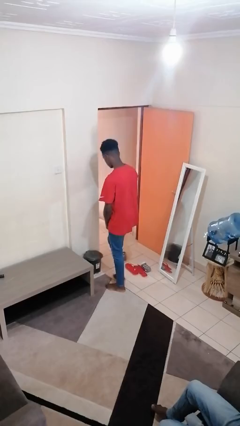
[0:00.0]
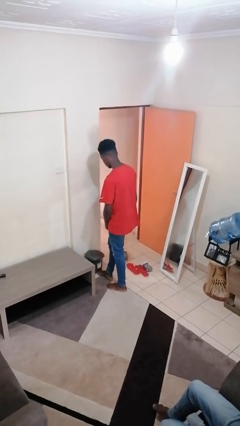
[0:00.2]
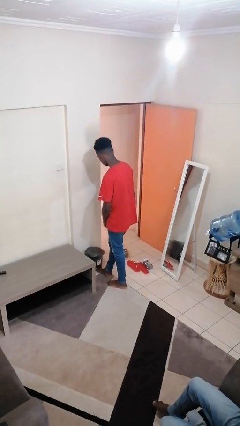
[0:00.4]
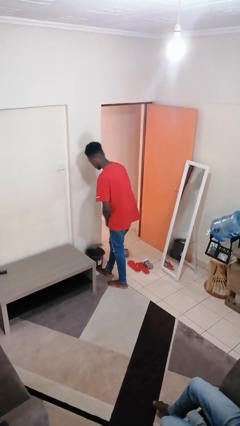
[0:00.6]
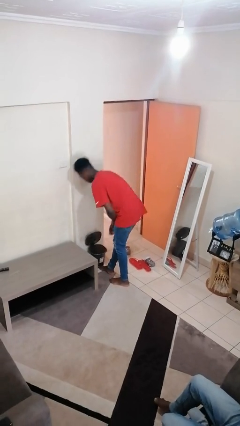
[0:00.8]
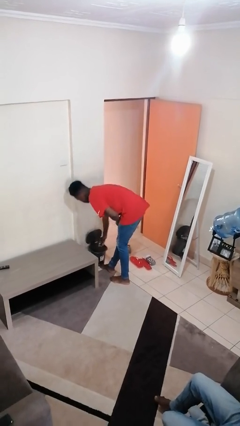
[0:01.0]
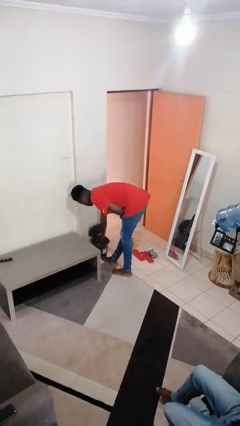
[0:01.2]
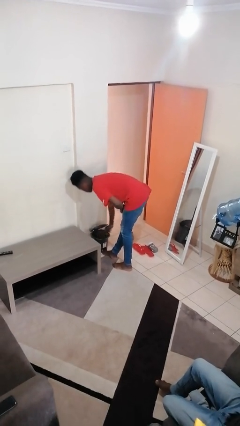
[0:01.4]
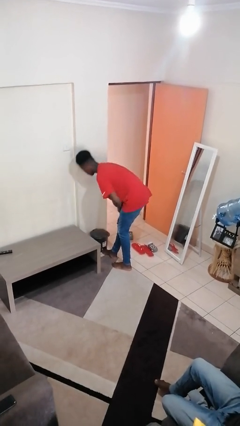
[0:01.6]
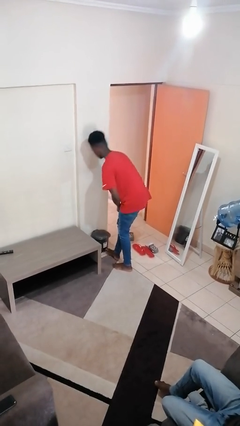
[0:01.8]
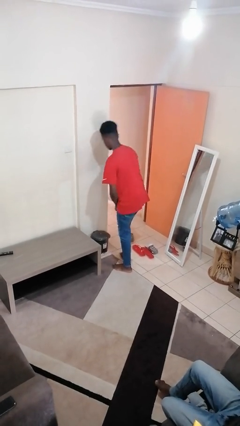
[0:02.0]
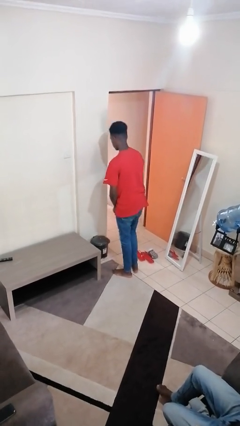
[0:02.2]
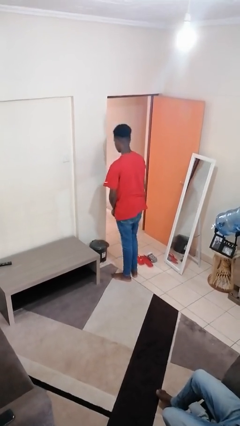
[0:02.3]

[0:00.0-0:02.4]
person discards trash

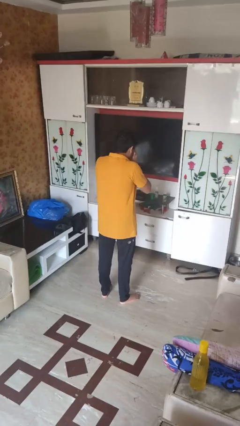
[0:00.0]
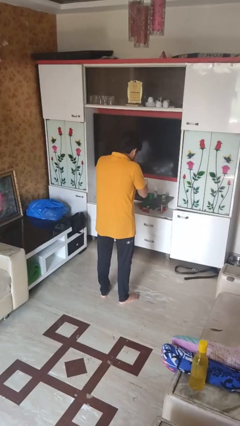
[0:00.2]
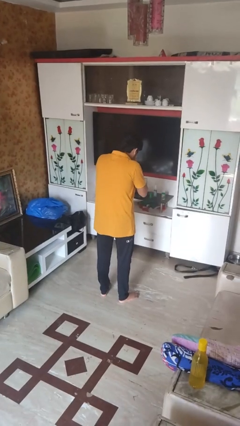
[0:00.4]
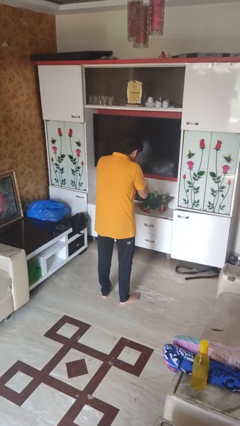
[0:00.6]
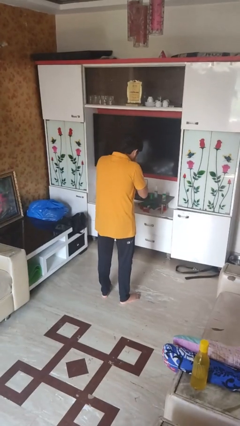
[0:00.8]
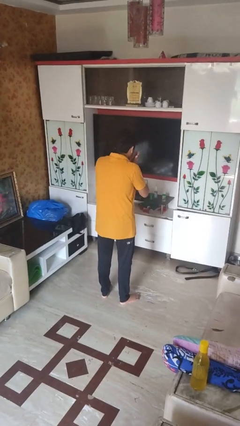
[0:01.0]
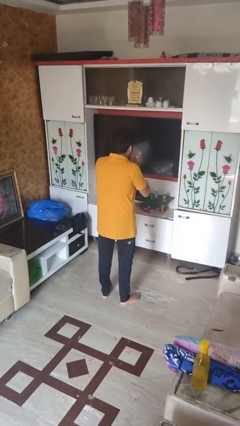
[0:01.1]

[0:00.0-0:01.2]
person sneezes into hand

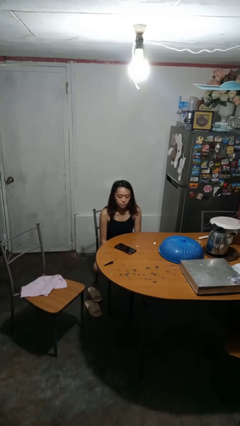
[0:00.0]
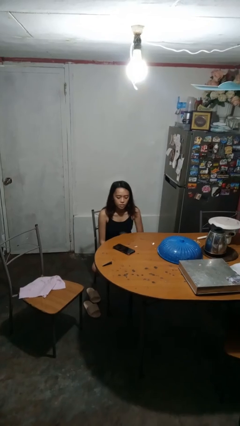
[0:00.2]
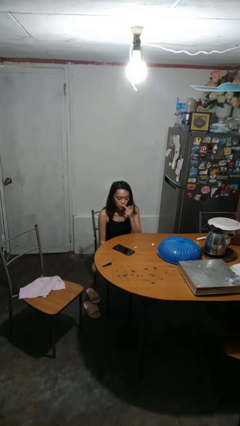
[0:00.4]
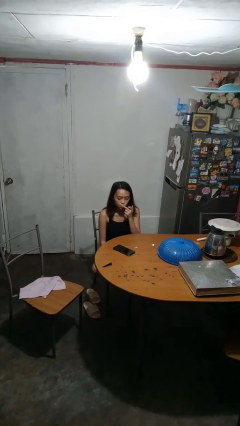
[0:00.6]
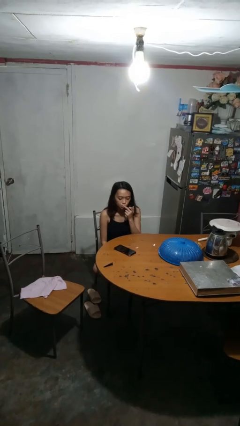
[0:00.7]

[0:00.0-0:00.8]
person licks fingers

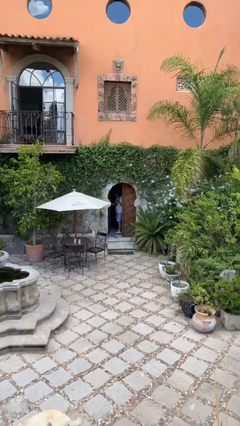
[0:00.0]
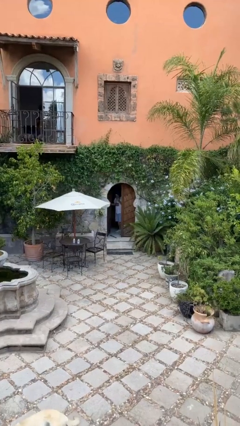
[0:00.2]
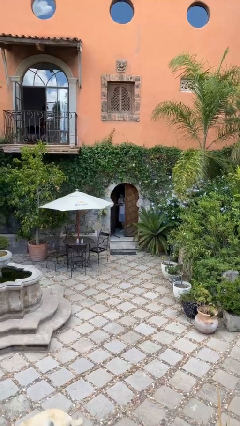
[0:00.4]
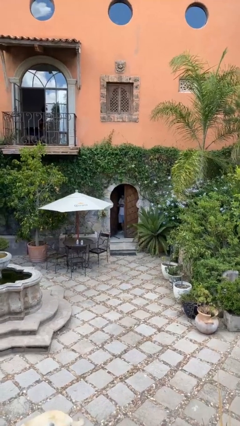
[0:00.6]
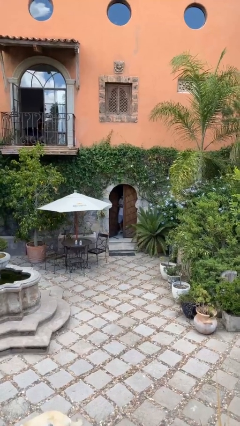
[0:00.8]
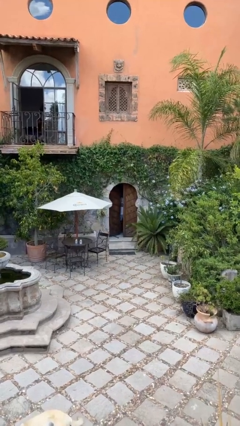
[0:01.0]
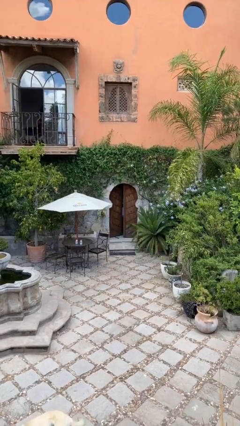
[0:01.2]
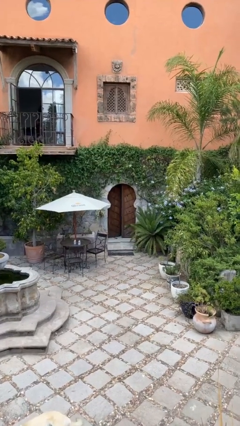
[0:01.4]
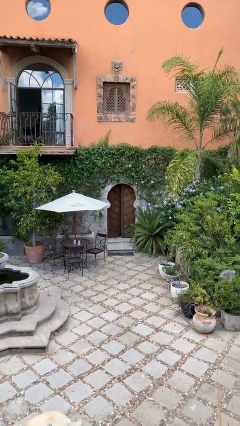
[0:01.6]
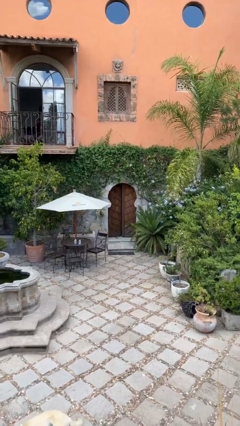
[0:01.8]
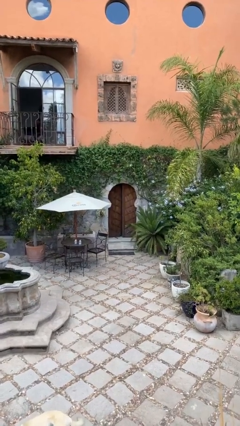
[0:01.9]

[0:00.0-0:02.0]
person closes facility door

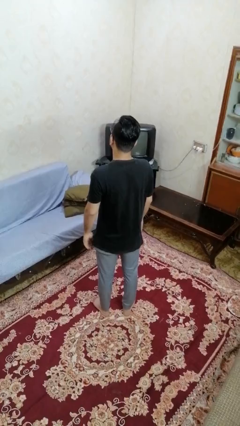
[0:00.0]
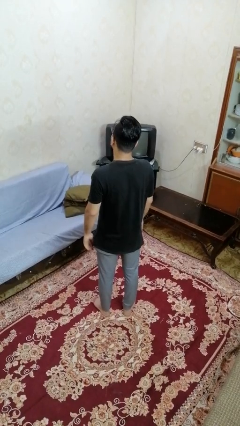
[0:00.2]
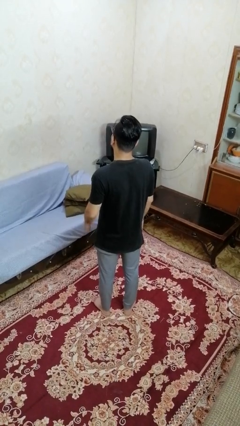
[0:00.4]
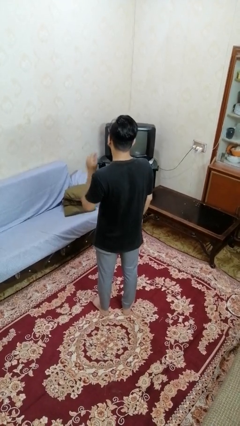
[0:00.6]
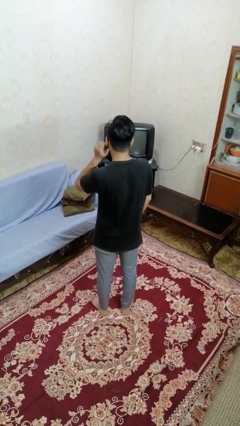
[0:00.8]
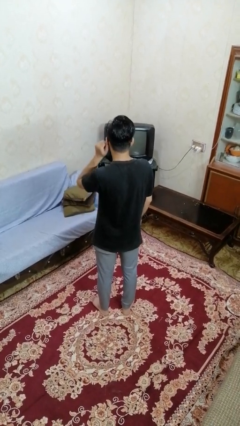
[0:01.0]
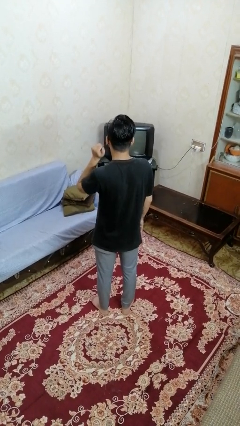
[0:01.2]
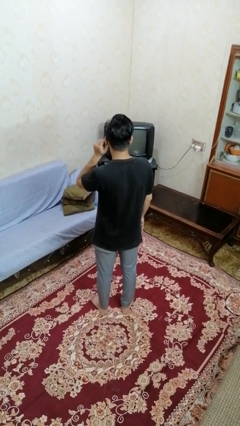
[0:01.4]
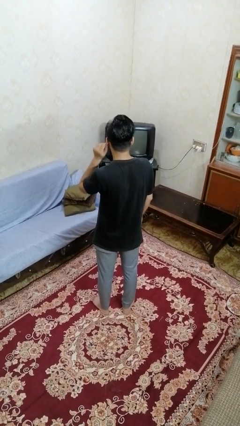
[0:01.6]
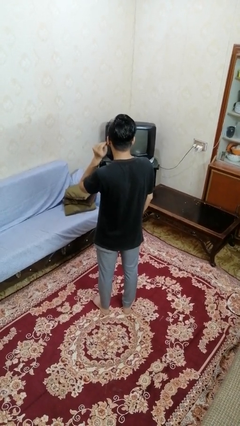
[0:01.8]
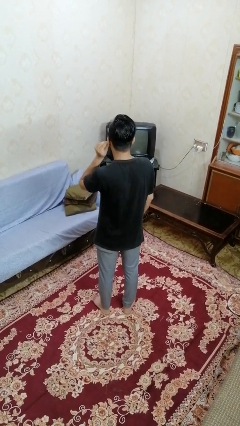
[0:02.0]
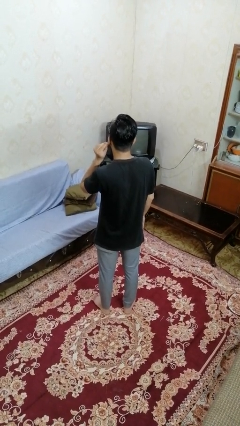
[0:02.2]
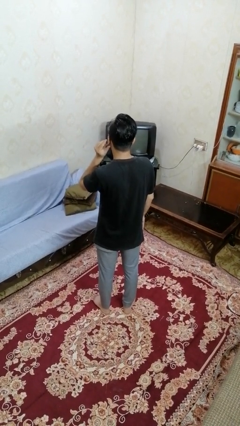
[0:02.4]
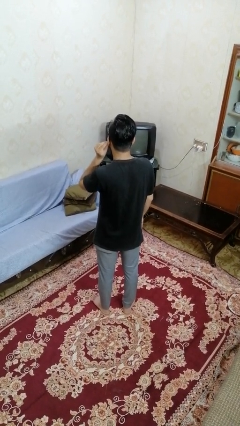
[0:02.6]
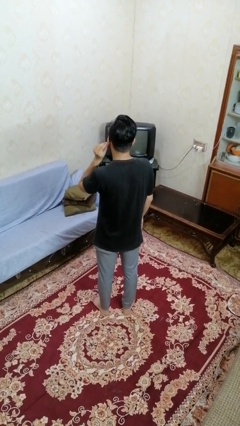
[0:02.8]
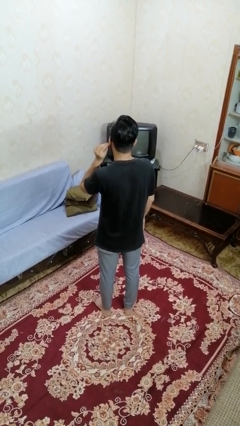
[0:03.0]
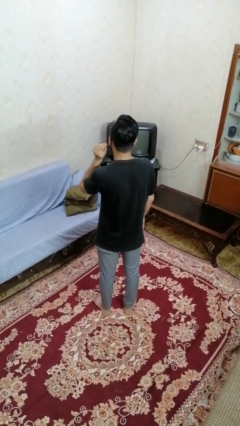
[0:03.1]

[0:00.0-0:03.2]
person touches earlobe

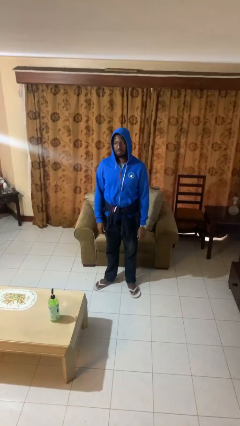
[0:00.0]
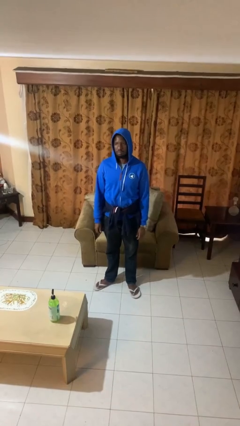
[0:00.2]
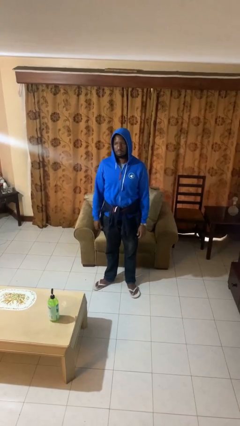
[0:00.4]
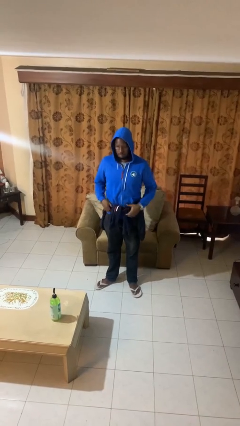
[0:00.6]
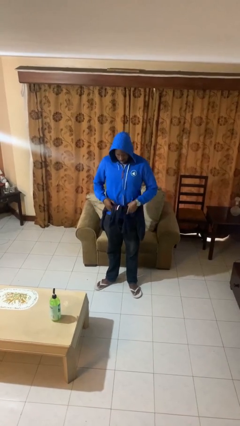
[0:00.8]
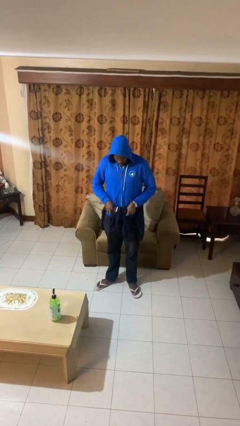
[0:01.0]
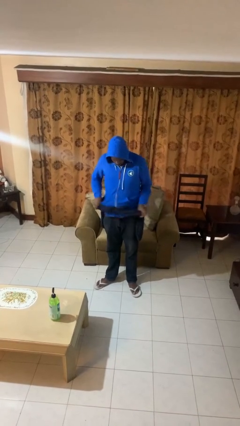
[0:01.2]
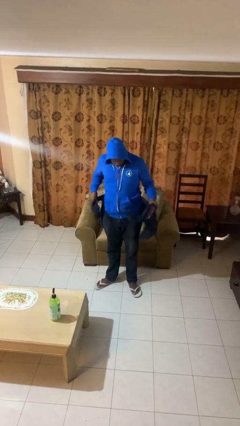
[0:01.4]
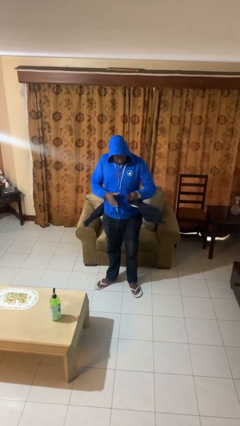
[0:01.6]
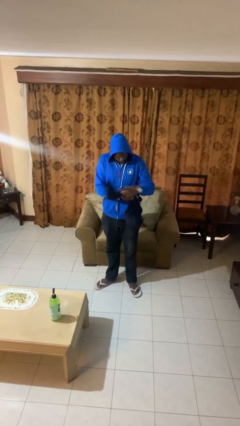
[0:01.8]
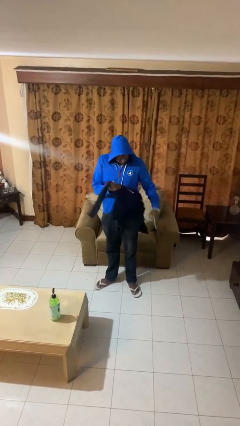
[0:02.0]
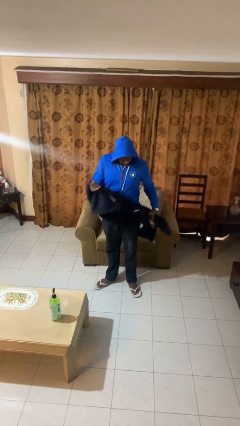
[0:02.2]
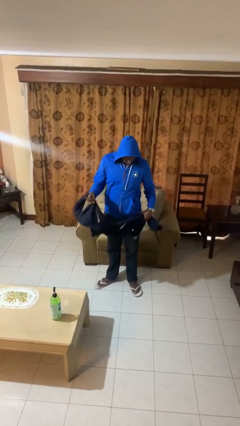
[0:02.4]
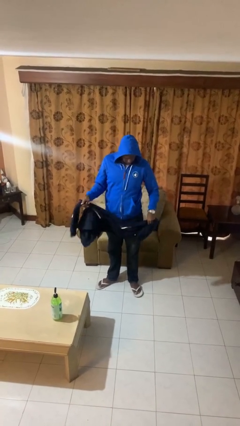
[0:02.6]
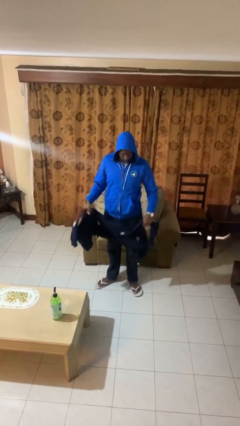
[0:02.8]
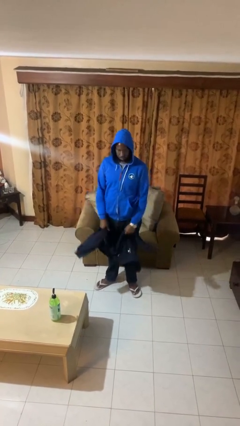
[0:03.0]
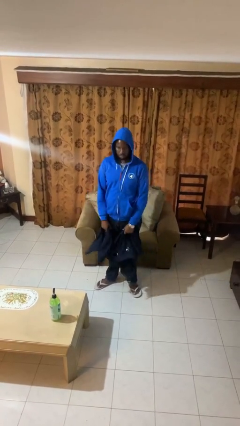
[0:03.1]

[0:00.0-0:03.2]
person unties jacket around waist

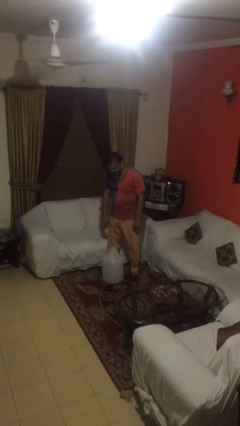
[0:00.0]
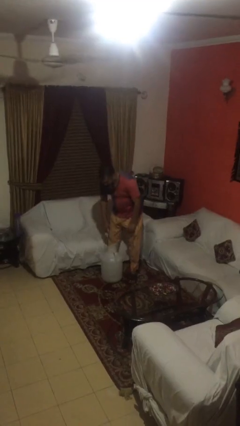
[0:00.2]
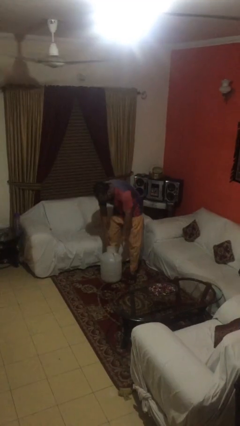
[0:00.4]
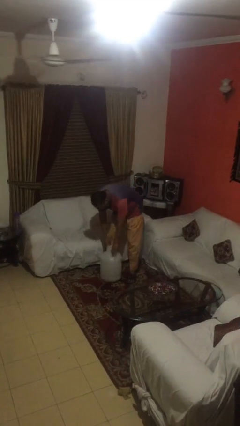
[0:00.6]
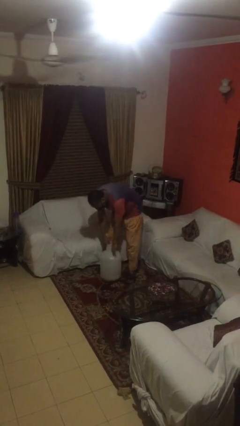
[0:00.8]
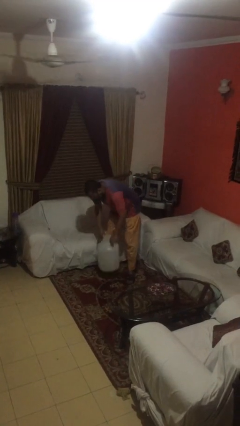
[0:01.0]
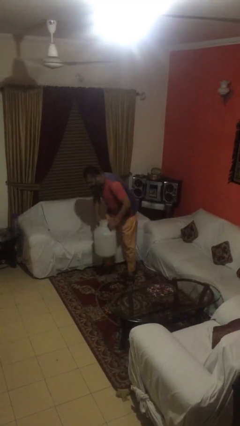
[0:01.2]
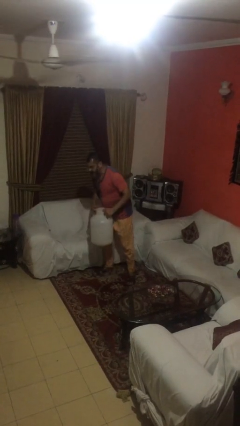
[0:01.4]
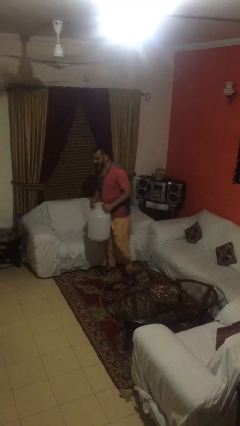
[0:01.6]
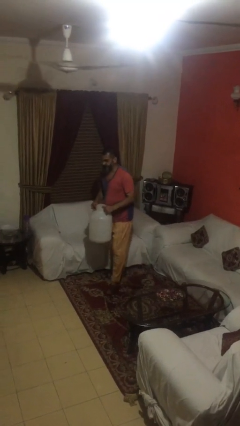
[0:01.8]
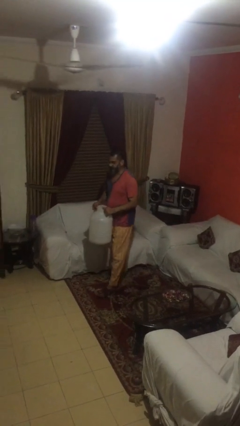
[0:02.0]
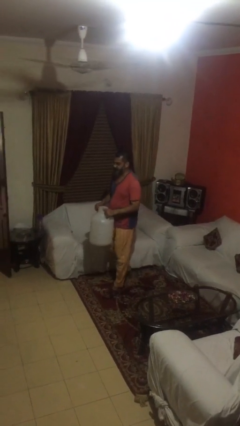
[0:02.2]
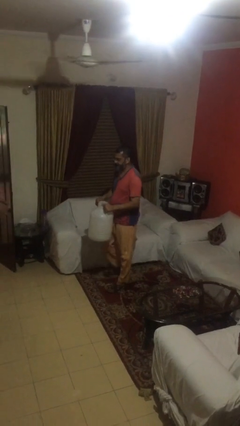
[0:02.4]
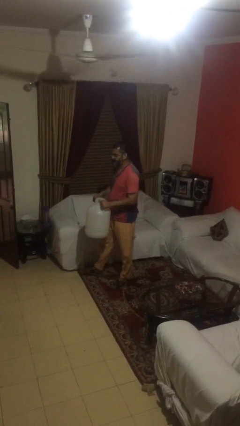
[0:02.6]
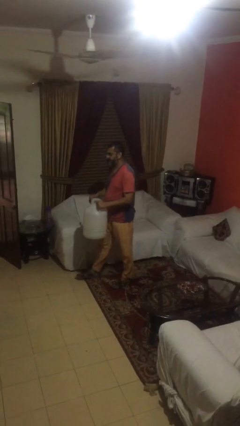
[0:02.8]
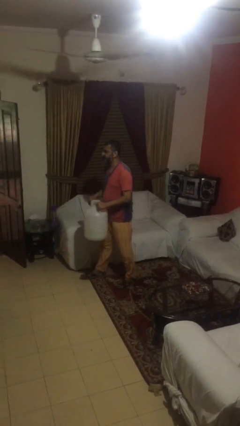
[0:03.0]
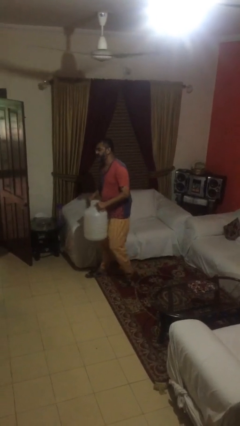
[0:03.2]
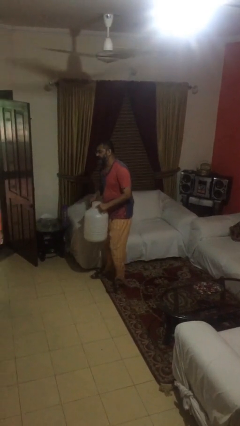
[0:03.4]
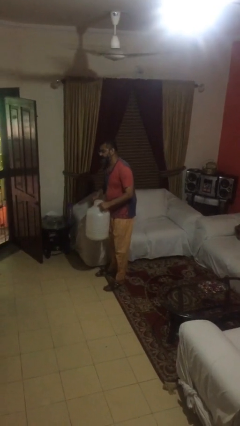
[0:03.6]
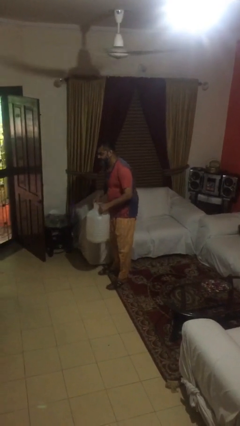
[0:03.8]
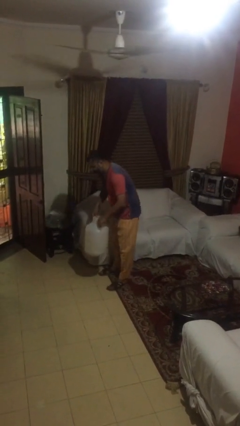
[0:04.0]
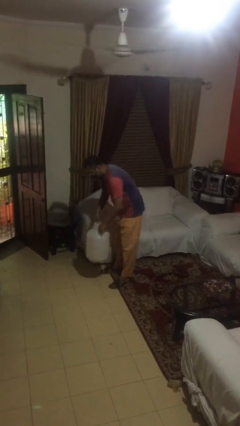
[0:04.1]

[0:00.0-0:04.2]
person carries heavy object
